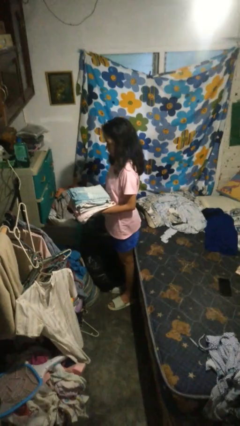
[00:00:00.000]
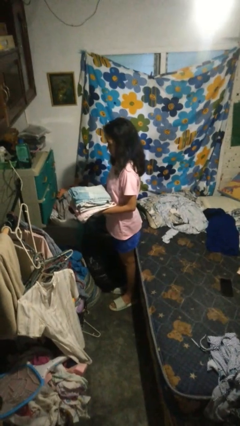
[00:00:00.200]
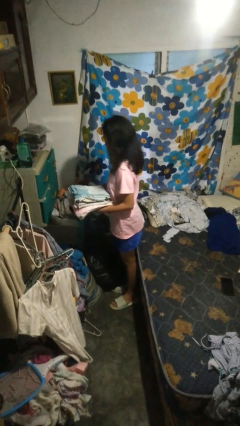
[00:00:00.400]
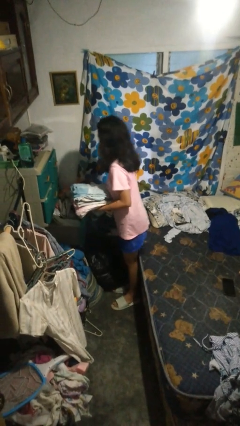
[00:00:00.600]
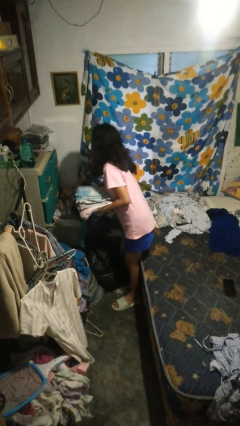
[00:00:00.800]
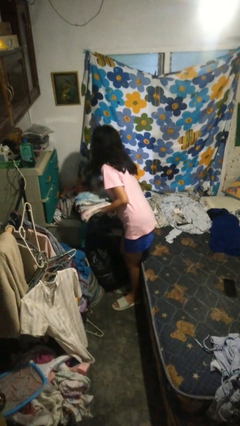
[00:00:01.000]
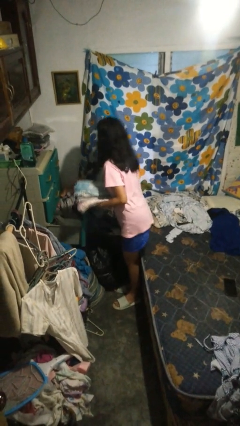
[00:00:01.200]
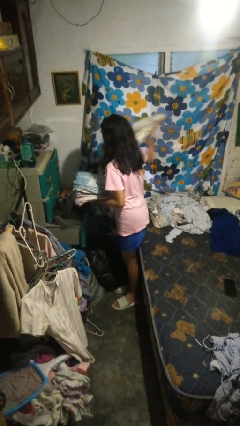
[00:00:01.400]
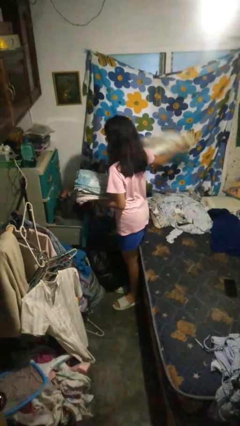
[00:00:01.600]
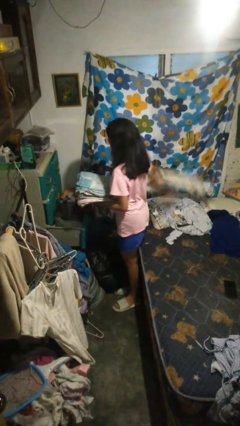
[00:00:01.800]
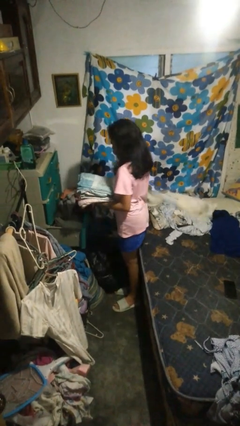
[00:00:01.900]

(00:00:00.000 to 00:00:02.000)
person takes clothes from dresser

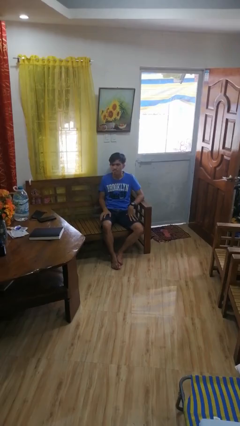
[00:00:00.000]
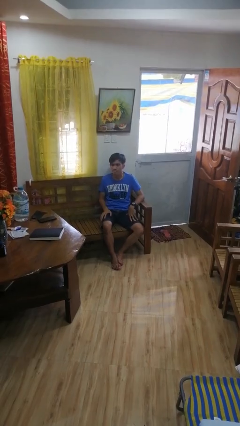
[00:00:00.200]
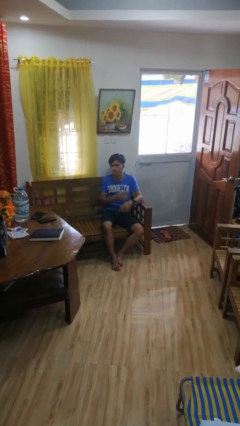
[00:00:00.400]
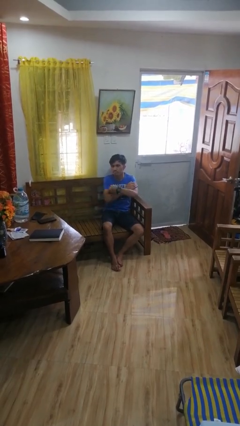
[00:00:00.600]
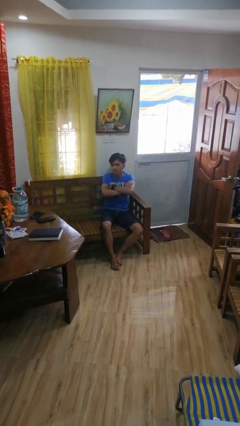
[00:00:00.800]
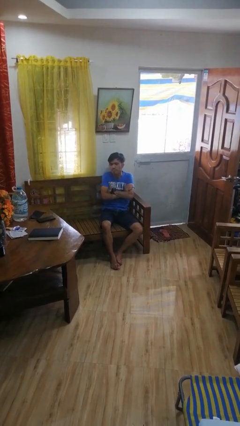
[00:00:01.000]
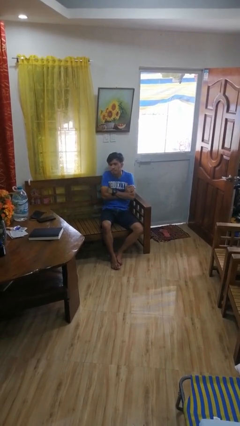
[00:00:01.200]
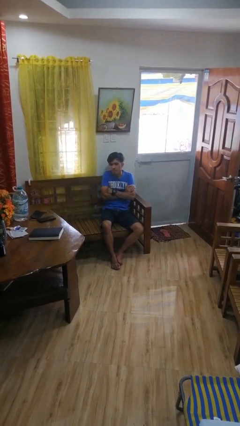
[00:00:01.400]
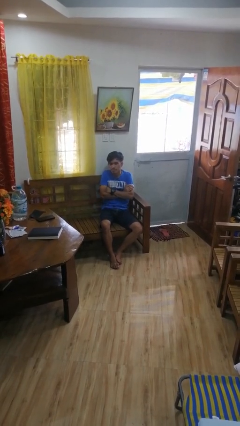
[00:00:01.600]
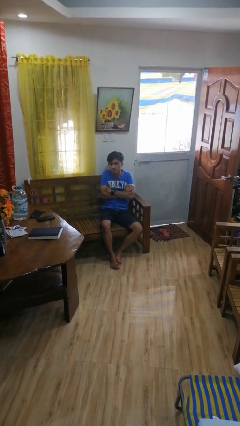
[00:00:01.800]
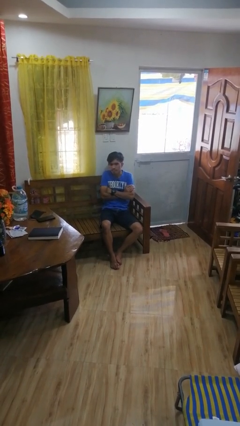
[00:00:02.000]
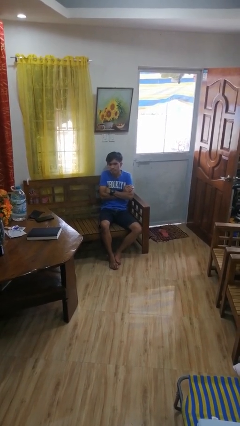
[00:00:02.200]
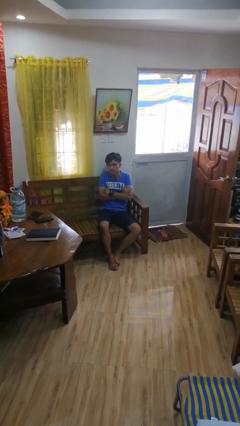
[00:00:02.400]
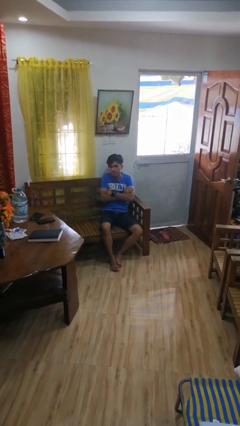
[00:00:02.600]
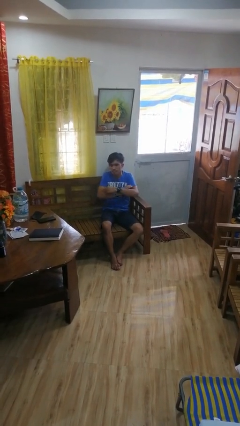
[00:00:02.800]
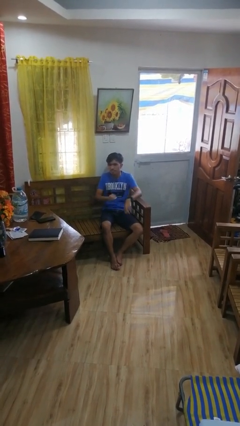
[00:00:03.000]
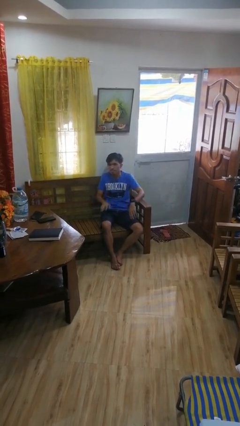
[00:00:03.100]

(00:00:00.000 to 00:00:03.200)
person crosses arms

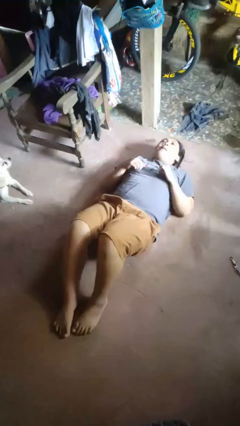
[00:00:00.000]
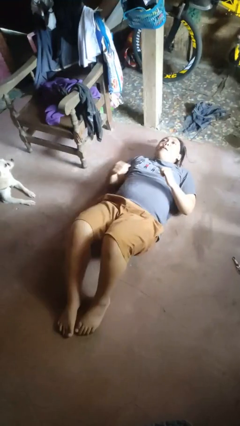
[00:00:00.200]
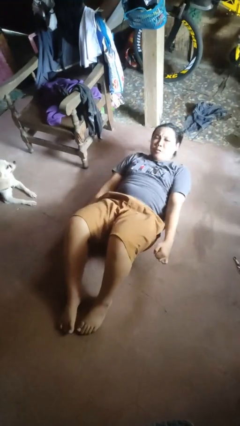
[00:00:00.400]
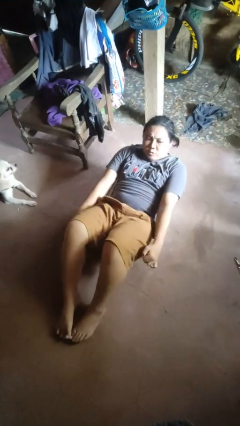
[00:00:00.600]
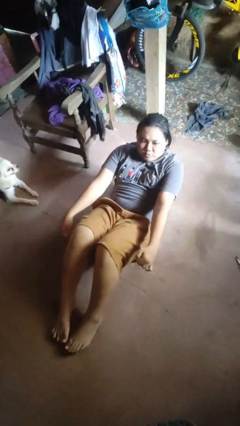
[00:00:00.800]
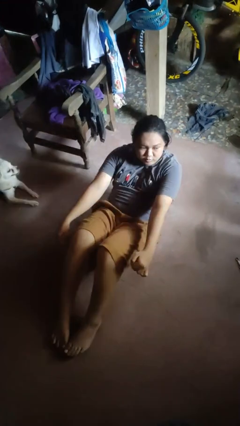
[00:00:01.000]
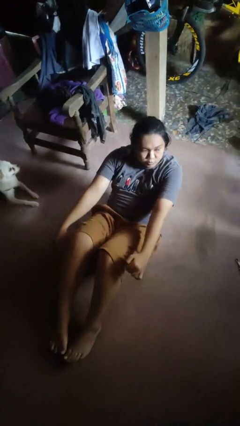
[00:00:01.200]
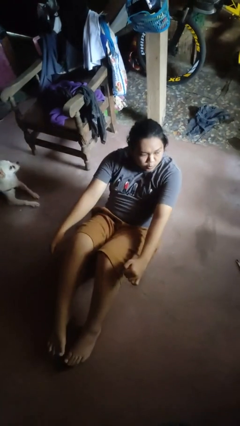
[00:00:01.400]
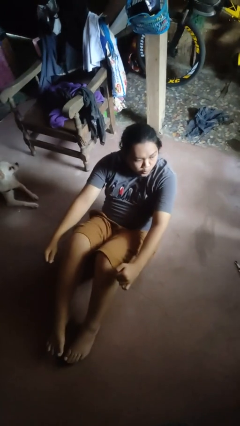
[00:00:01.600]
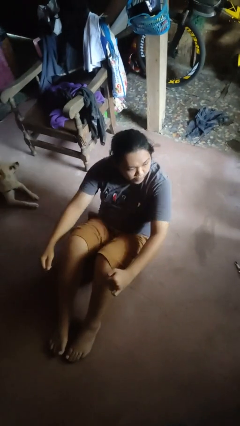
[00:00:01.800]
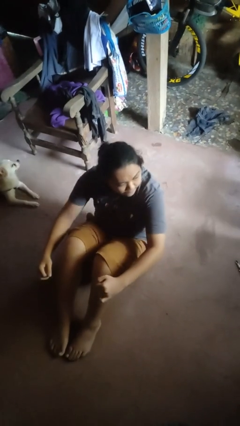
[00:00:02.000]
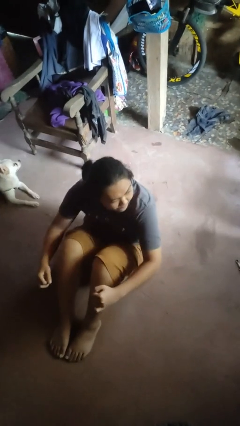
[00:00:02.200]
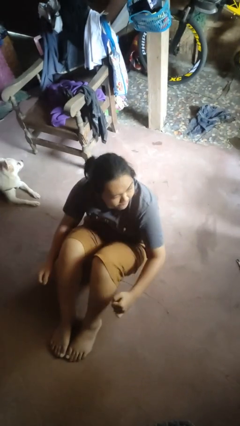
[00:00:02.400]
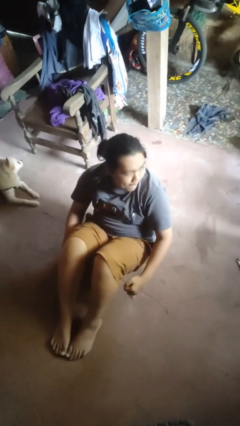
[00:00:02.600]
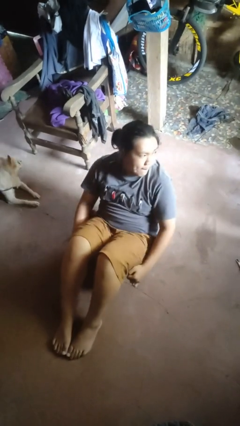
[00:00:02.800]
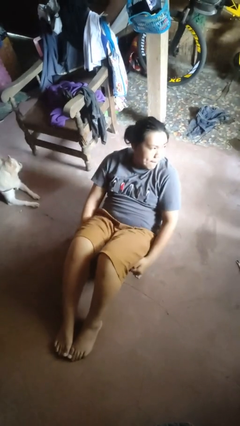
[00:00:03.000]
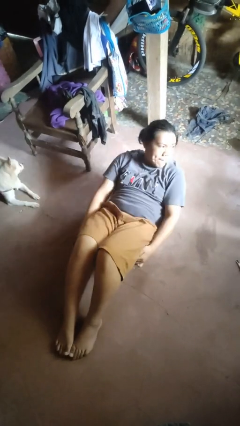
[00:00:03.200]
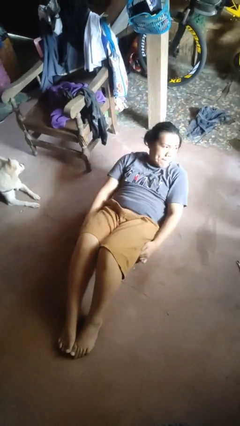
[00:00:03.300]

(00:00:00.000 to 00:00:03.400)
person exercises with situp

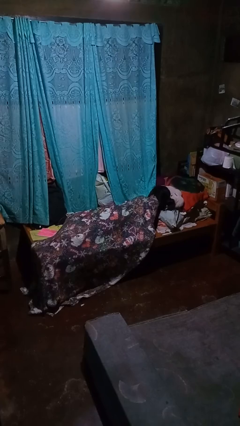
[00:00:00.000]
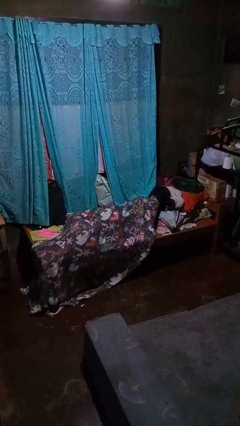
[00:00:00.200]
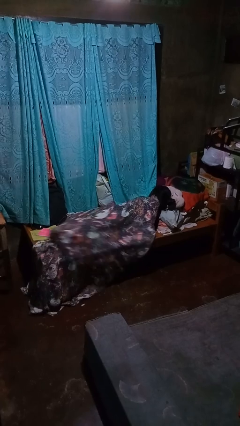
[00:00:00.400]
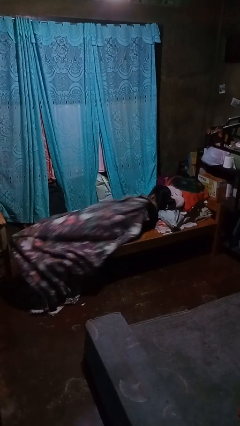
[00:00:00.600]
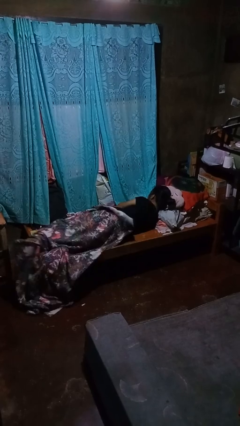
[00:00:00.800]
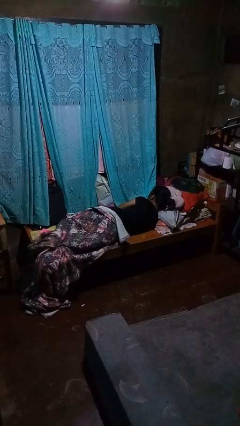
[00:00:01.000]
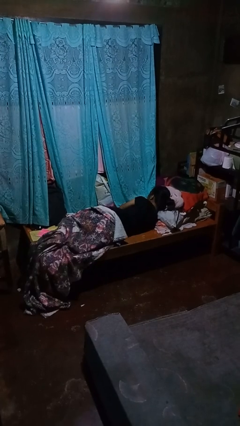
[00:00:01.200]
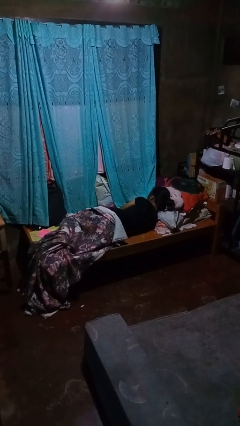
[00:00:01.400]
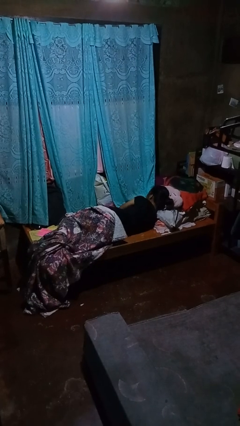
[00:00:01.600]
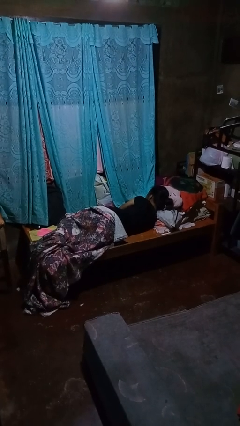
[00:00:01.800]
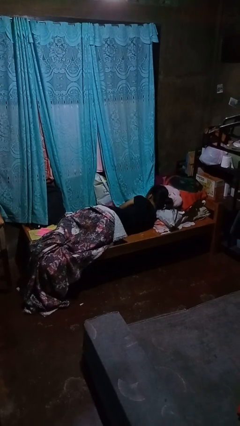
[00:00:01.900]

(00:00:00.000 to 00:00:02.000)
person uncovers with bedsheets

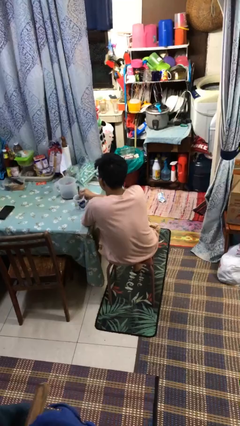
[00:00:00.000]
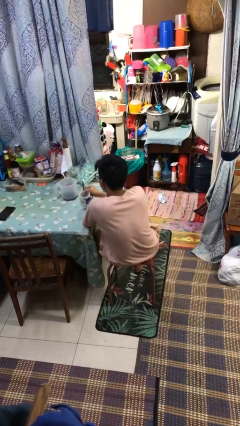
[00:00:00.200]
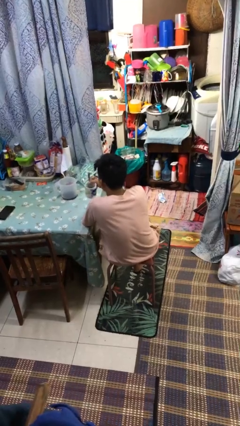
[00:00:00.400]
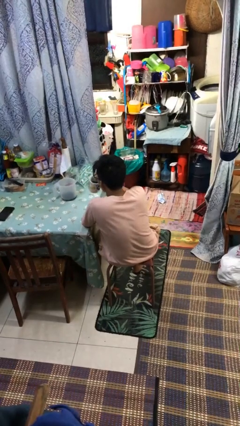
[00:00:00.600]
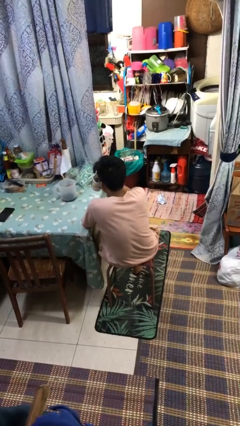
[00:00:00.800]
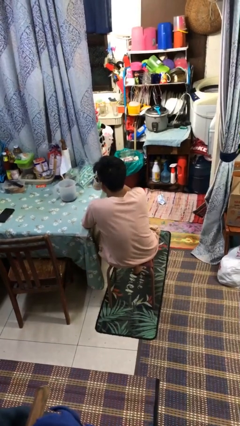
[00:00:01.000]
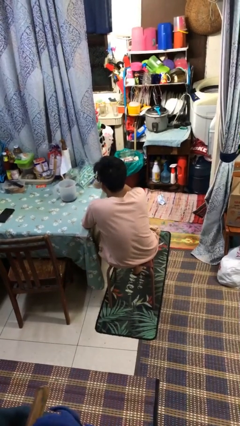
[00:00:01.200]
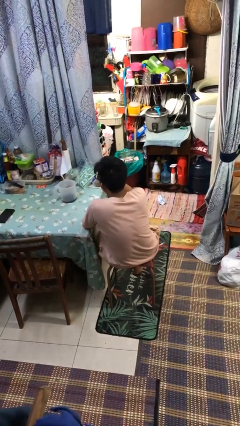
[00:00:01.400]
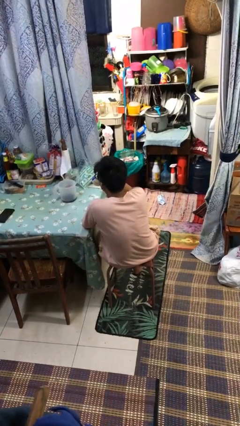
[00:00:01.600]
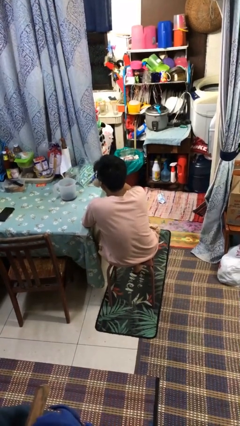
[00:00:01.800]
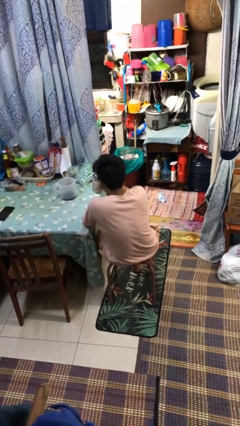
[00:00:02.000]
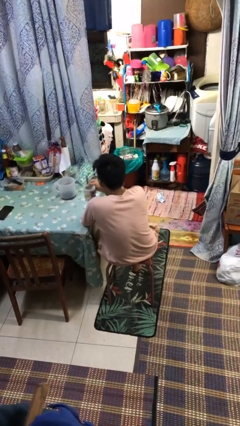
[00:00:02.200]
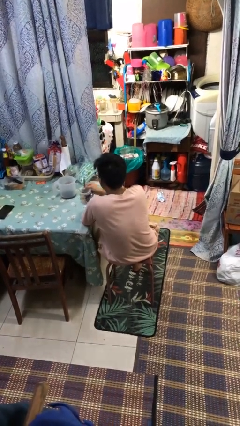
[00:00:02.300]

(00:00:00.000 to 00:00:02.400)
person drinks from mug

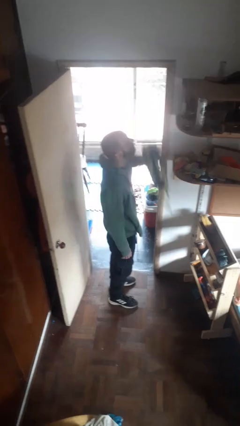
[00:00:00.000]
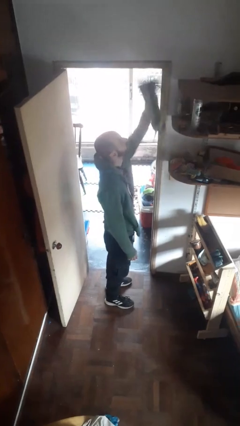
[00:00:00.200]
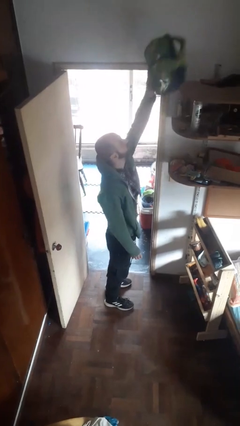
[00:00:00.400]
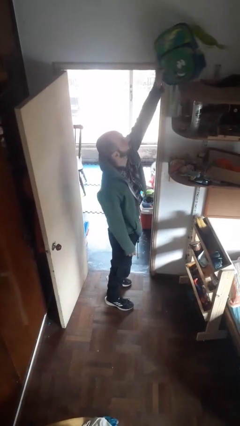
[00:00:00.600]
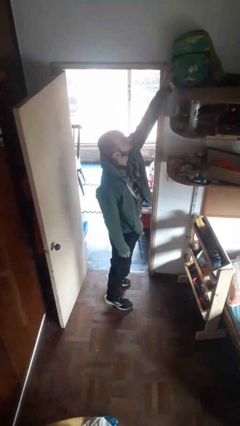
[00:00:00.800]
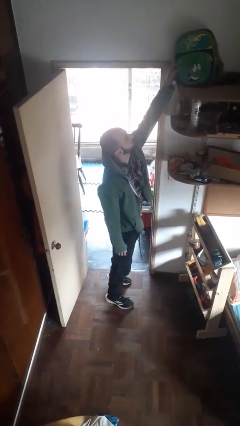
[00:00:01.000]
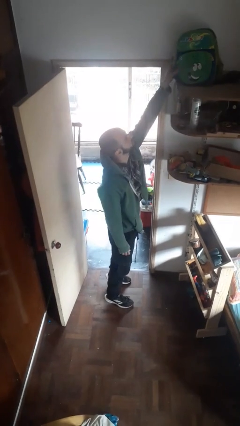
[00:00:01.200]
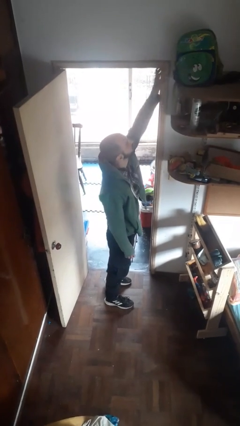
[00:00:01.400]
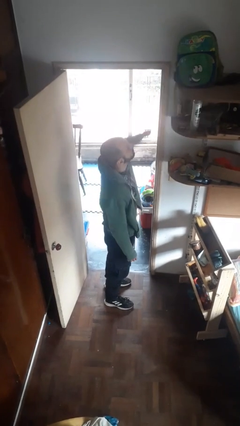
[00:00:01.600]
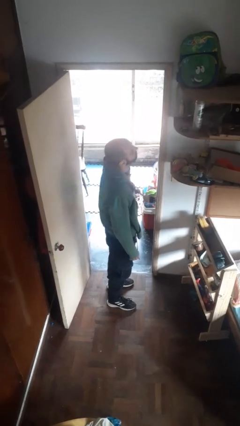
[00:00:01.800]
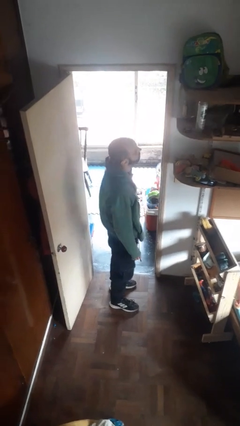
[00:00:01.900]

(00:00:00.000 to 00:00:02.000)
person picks up object from shelf

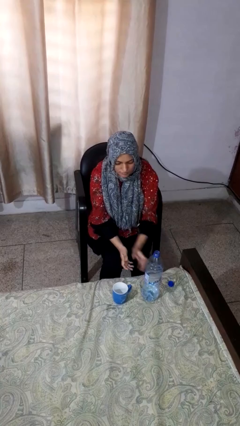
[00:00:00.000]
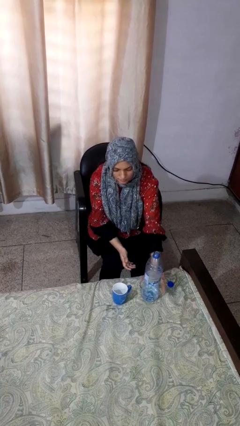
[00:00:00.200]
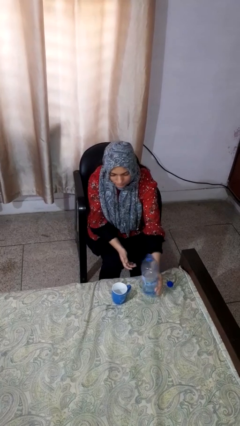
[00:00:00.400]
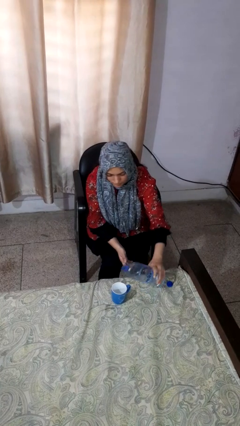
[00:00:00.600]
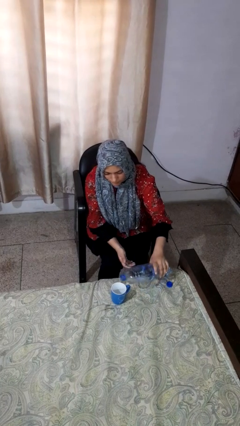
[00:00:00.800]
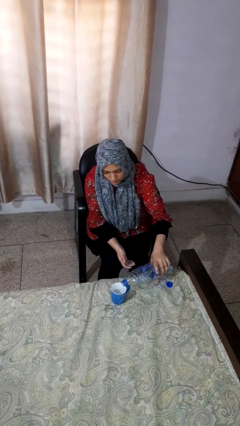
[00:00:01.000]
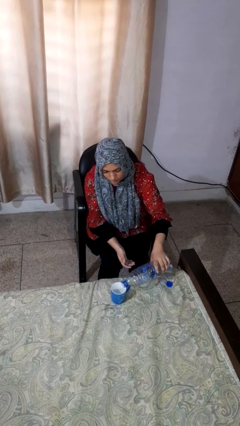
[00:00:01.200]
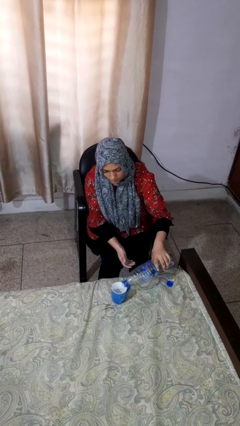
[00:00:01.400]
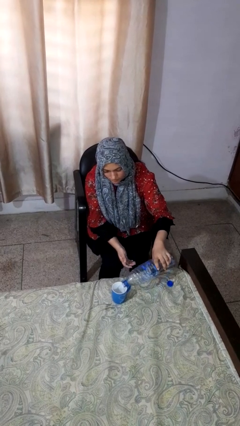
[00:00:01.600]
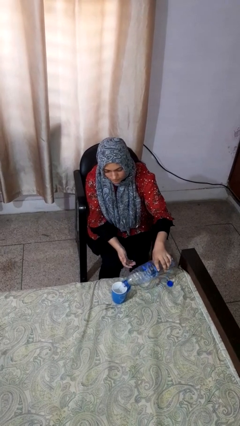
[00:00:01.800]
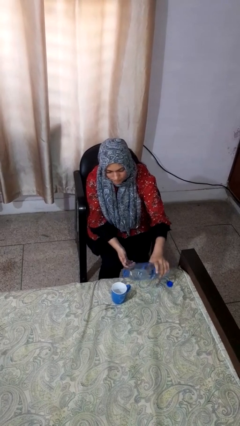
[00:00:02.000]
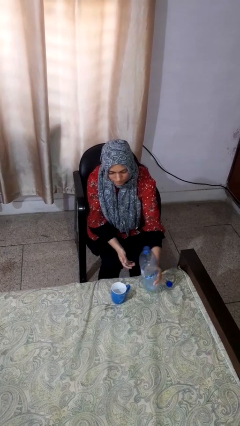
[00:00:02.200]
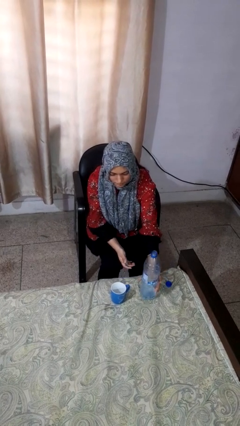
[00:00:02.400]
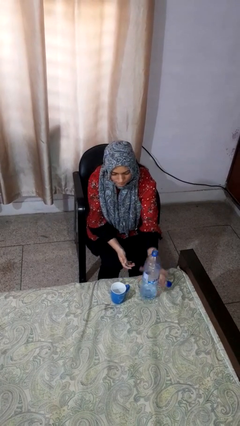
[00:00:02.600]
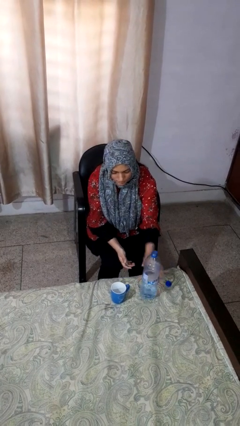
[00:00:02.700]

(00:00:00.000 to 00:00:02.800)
person pours liquid into cup
